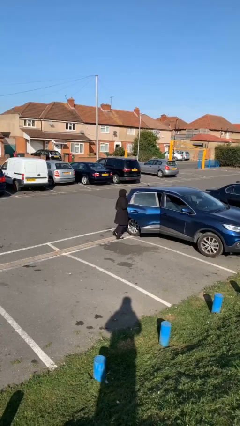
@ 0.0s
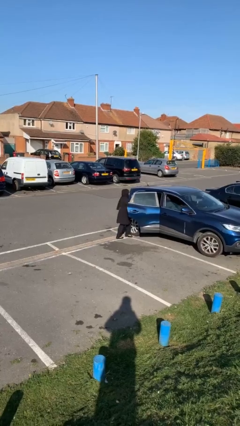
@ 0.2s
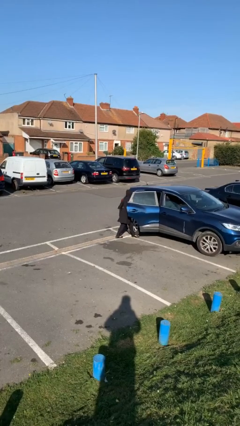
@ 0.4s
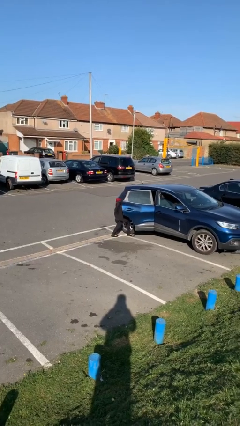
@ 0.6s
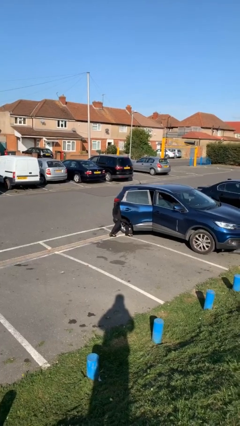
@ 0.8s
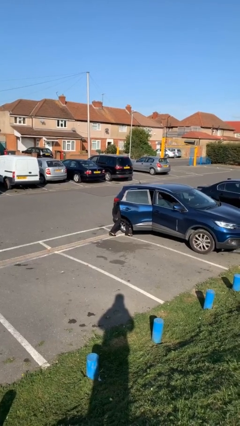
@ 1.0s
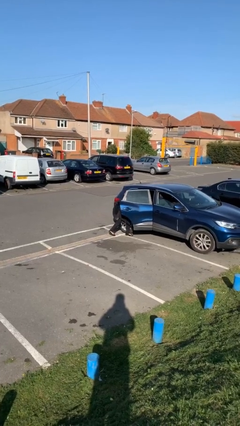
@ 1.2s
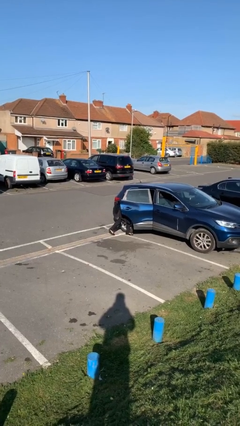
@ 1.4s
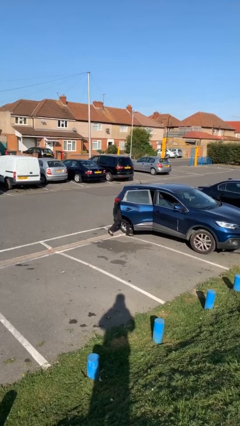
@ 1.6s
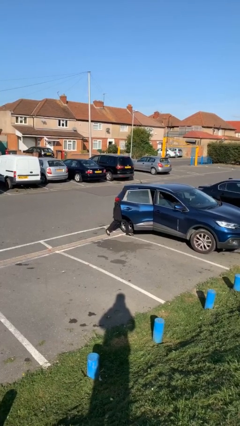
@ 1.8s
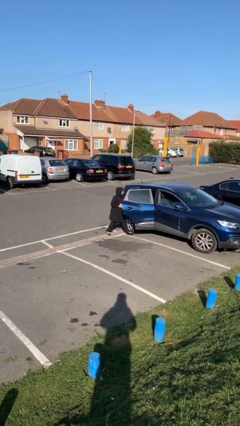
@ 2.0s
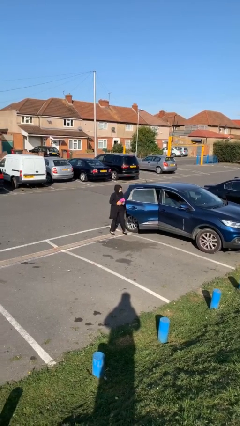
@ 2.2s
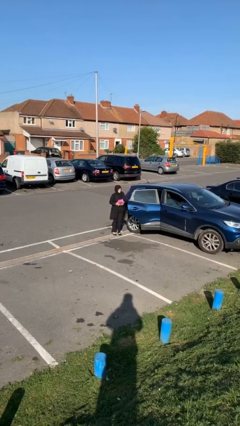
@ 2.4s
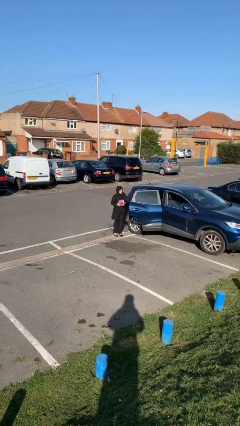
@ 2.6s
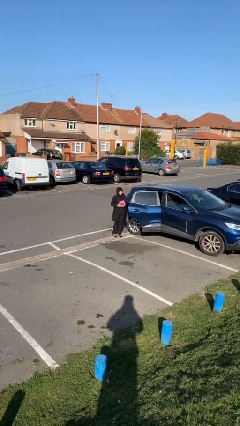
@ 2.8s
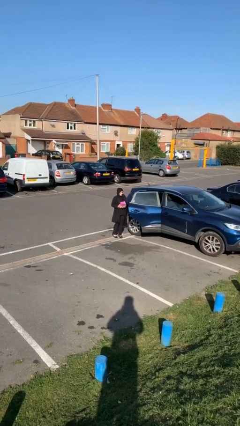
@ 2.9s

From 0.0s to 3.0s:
person unloads car

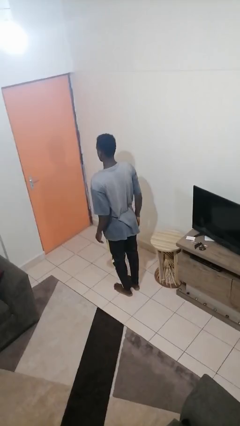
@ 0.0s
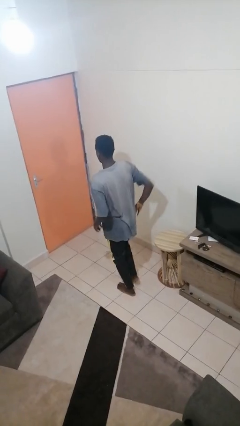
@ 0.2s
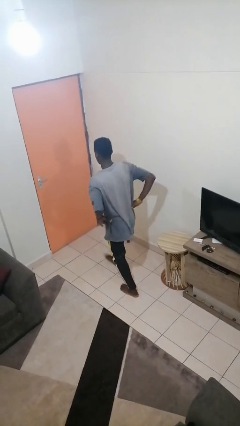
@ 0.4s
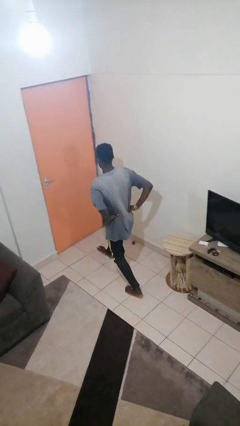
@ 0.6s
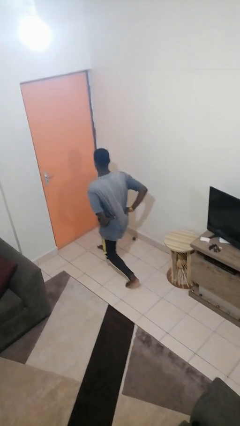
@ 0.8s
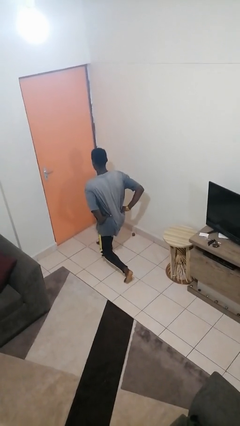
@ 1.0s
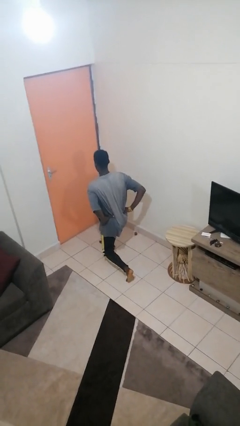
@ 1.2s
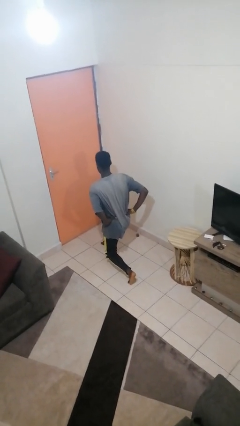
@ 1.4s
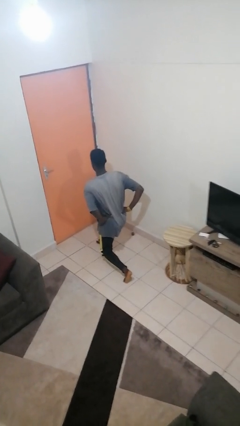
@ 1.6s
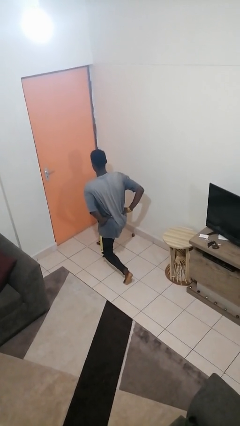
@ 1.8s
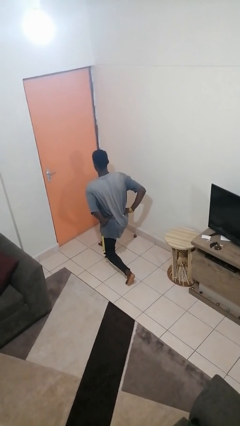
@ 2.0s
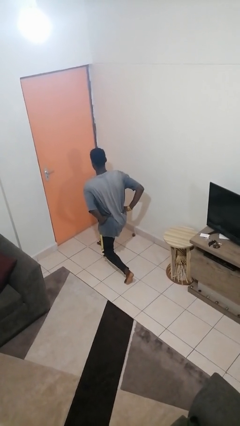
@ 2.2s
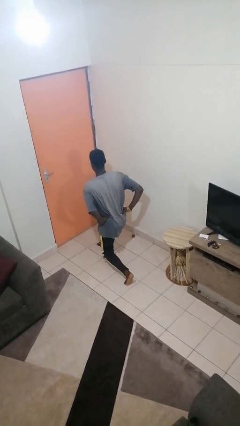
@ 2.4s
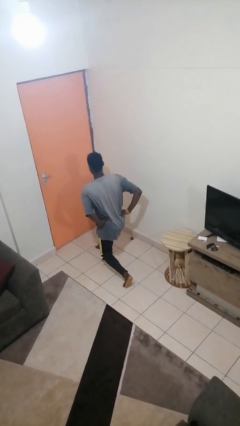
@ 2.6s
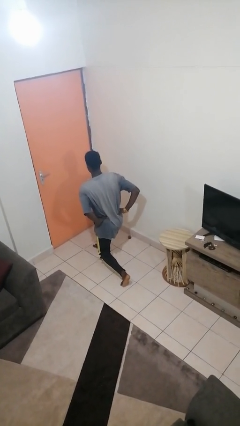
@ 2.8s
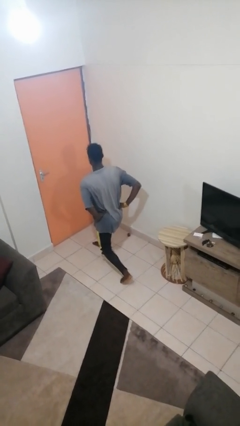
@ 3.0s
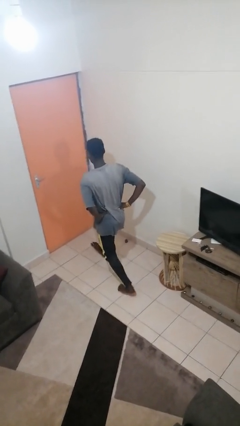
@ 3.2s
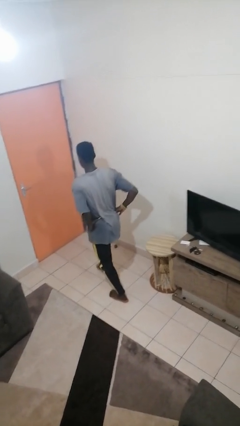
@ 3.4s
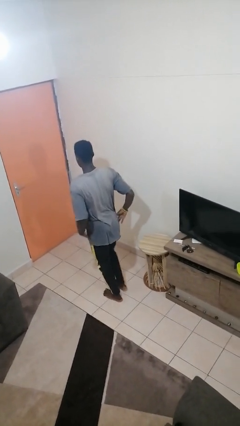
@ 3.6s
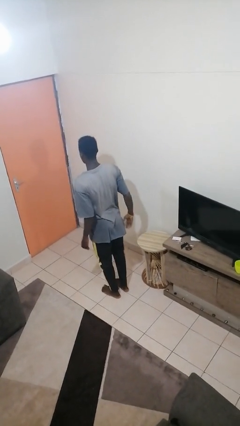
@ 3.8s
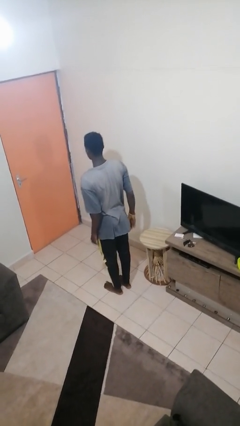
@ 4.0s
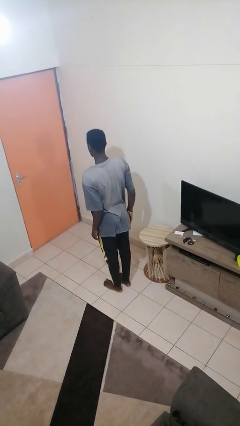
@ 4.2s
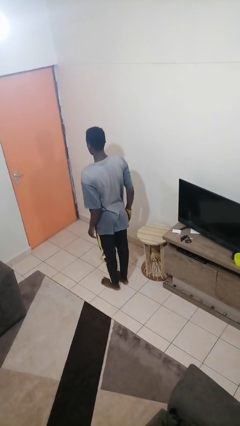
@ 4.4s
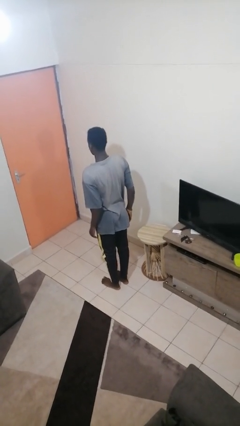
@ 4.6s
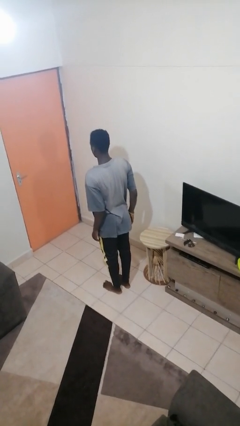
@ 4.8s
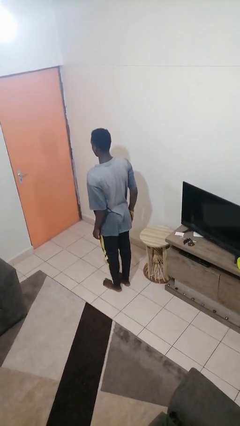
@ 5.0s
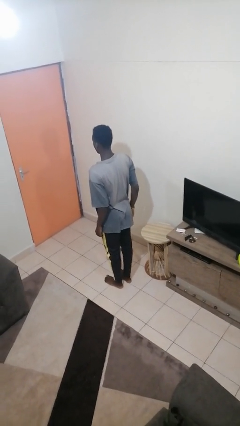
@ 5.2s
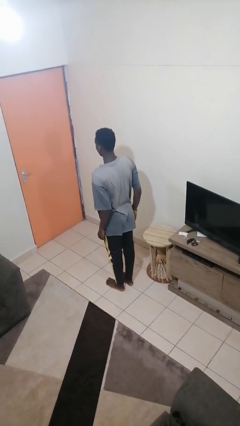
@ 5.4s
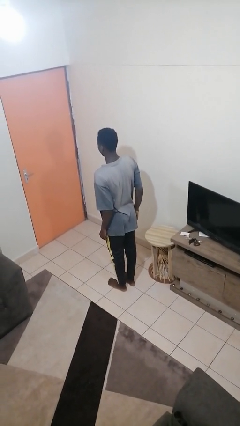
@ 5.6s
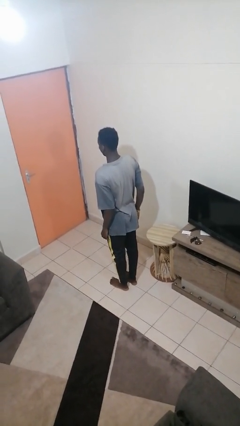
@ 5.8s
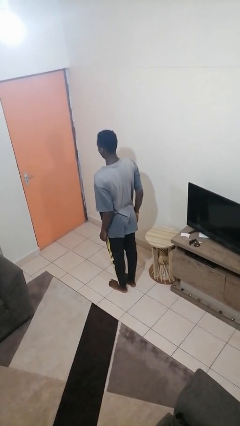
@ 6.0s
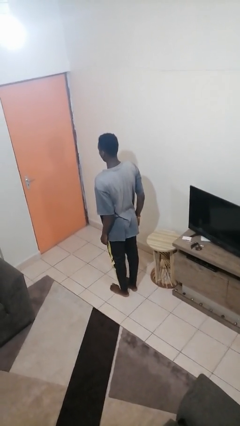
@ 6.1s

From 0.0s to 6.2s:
person exercises with lunges

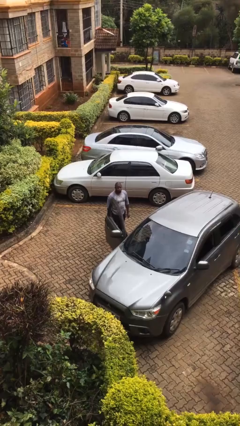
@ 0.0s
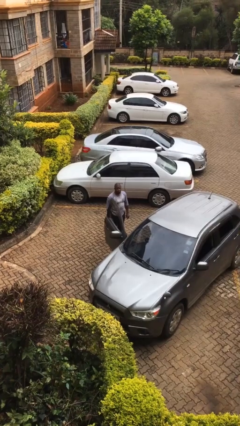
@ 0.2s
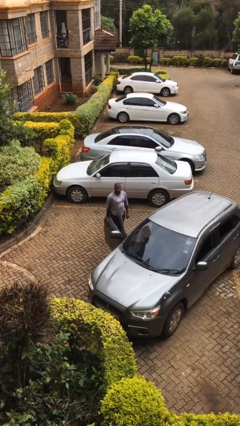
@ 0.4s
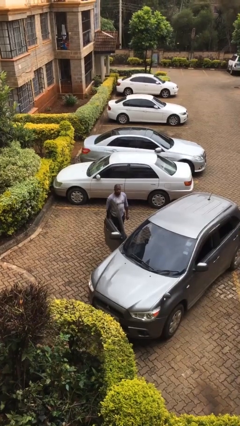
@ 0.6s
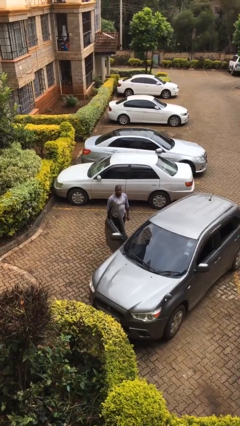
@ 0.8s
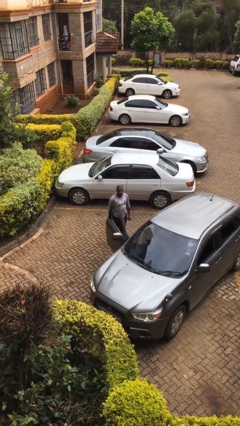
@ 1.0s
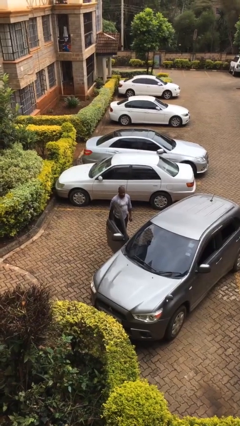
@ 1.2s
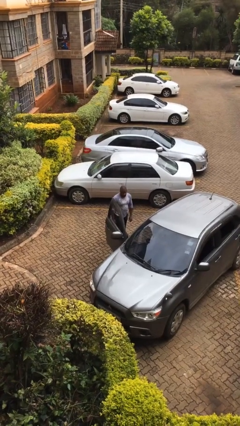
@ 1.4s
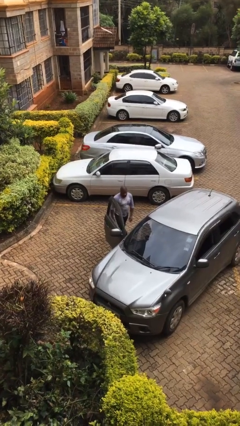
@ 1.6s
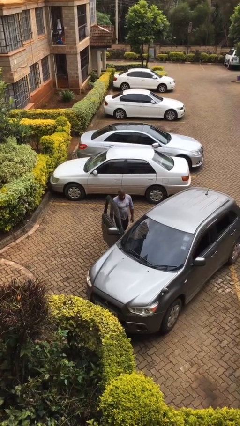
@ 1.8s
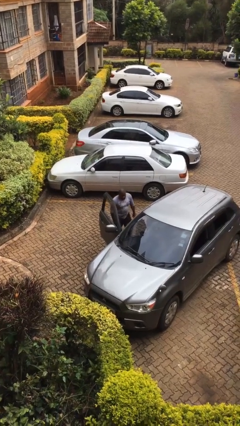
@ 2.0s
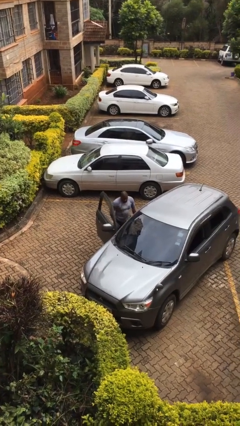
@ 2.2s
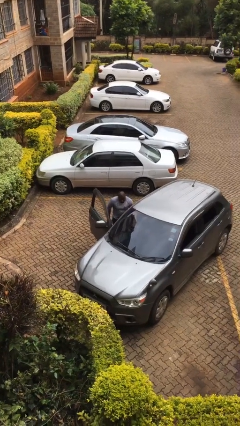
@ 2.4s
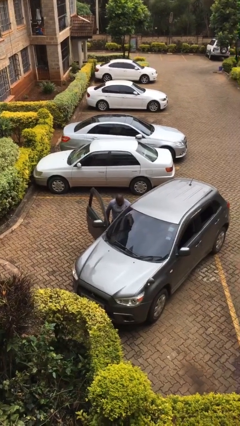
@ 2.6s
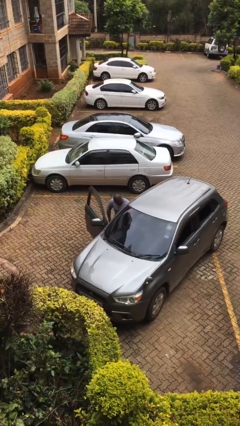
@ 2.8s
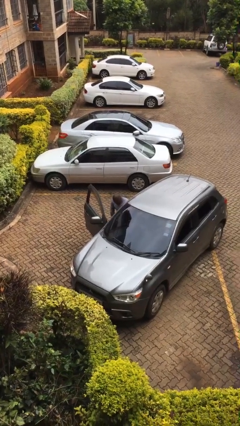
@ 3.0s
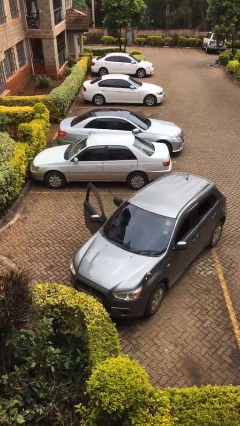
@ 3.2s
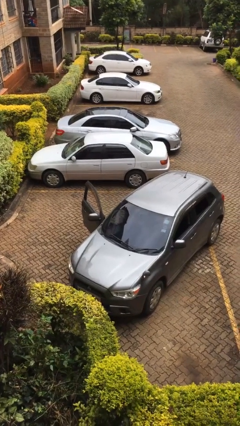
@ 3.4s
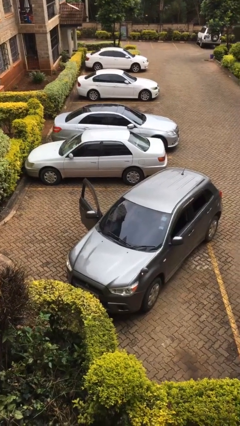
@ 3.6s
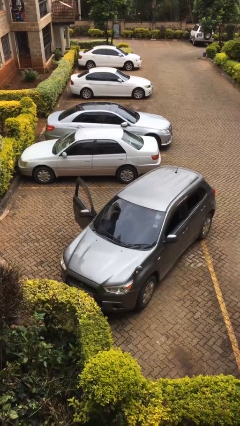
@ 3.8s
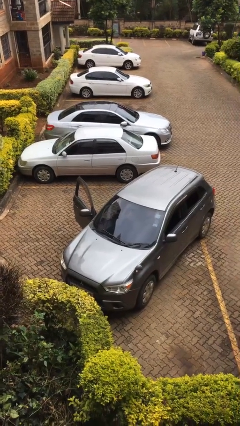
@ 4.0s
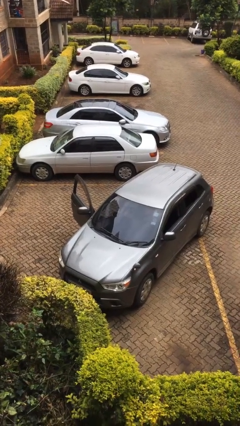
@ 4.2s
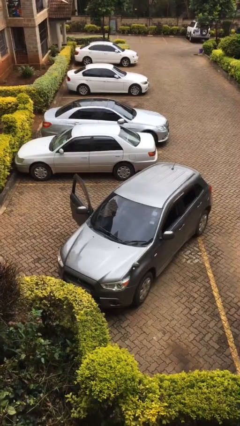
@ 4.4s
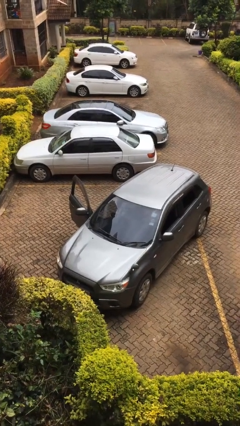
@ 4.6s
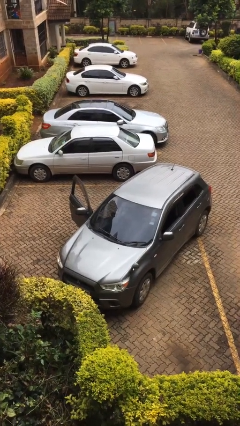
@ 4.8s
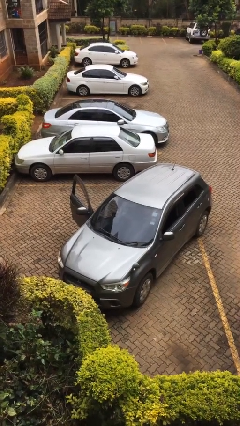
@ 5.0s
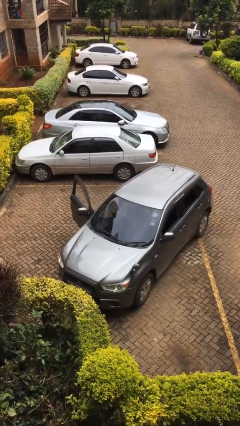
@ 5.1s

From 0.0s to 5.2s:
person enters car

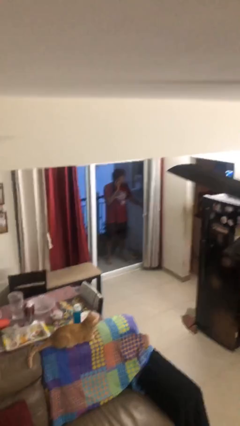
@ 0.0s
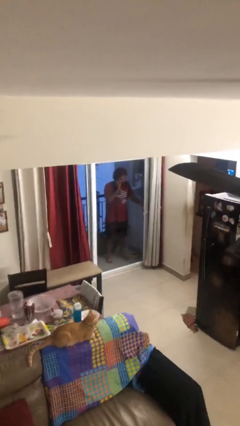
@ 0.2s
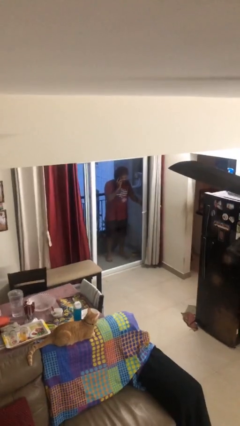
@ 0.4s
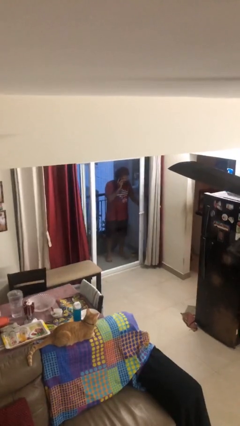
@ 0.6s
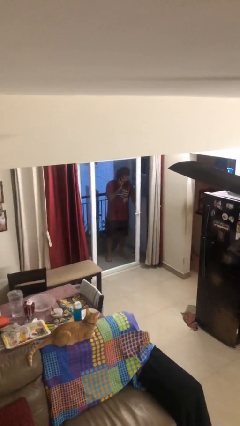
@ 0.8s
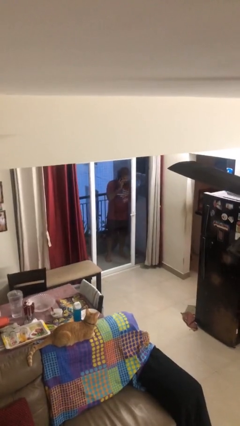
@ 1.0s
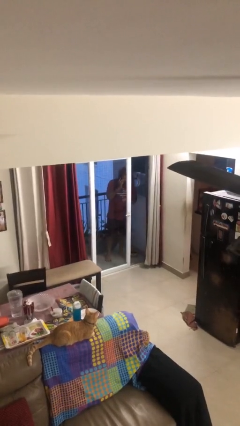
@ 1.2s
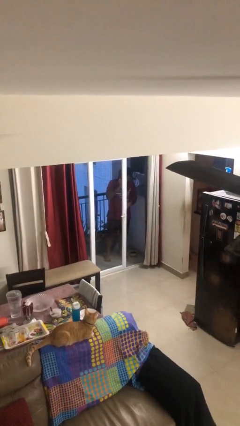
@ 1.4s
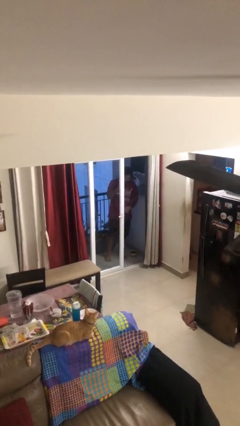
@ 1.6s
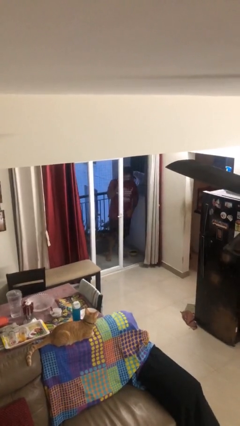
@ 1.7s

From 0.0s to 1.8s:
person opens facility door

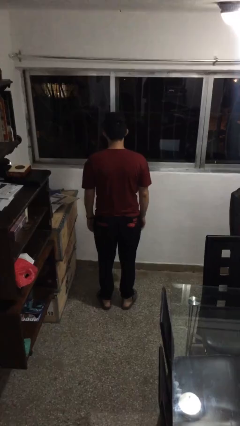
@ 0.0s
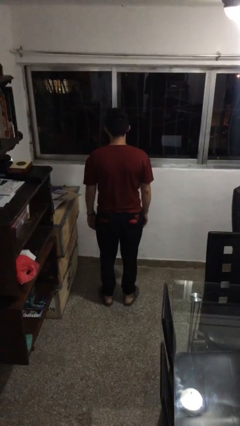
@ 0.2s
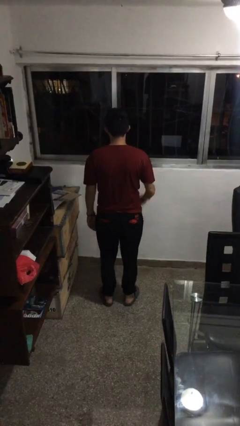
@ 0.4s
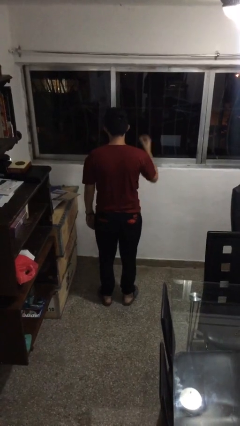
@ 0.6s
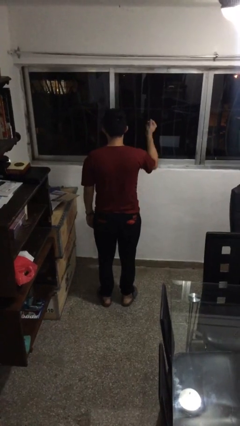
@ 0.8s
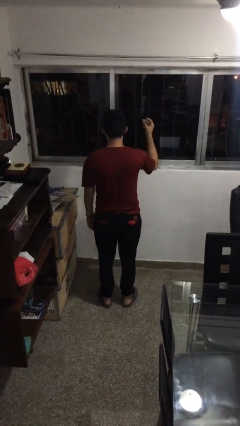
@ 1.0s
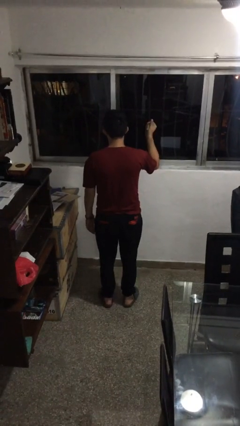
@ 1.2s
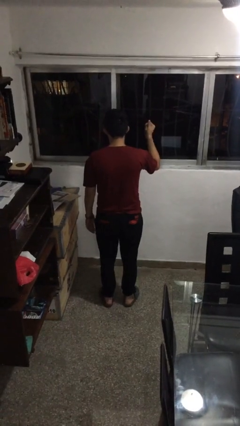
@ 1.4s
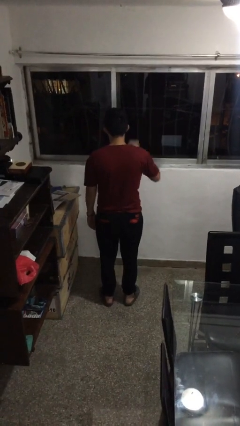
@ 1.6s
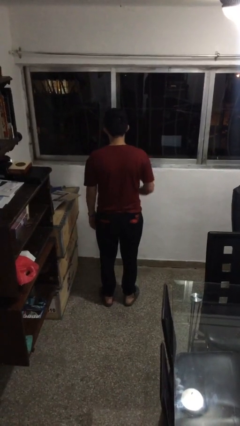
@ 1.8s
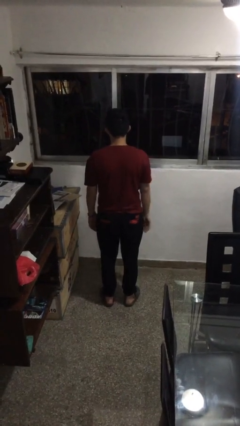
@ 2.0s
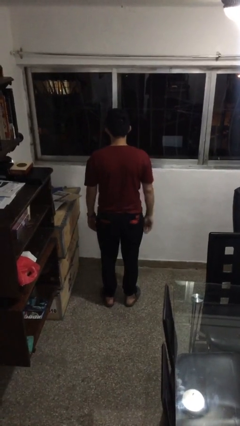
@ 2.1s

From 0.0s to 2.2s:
person snaps fingers
